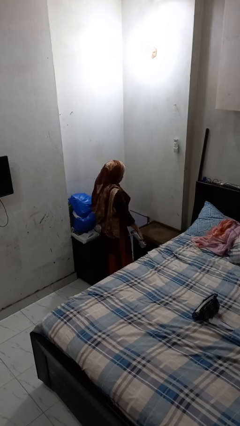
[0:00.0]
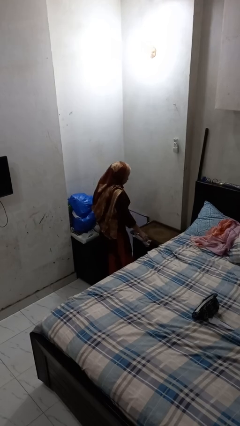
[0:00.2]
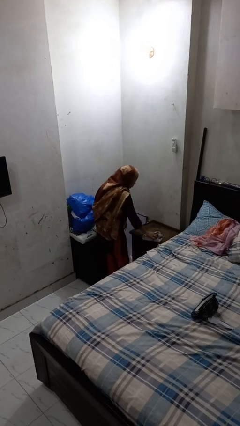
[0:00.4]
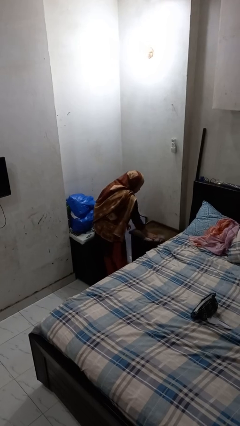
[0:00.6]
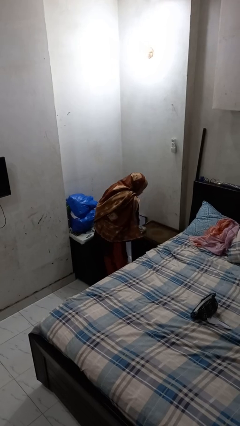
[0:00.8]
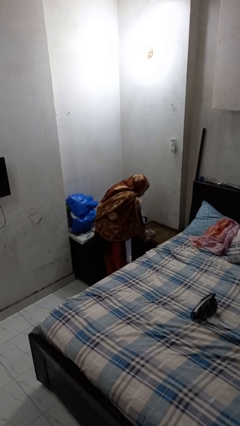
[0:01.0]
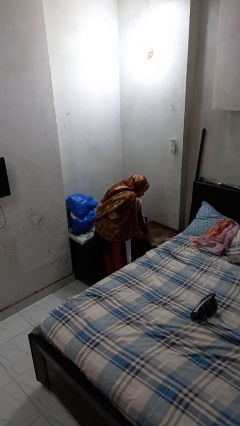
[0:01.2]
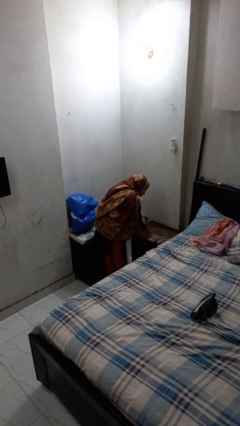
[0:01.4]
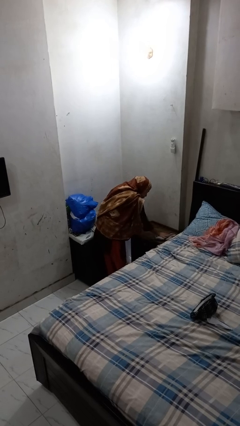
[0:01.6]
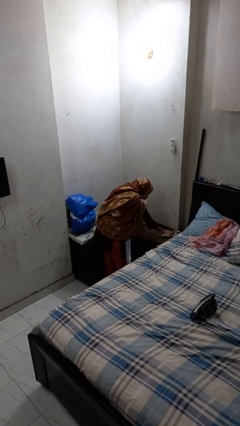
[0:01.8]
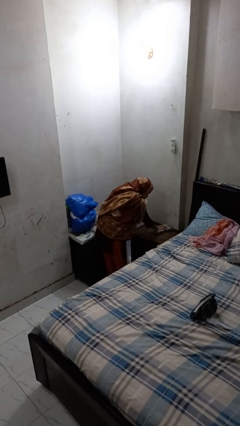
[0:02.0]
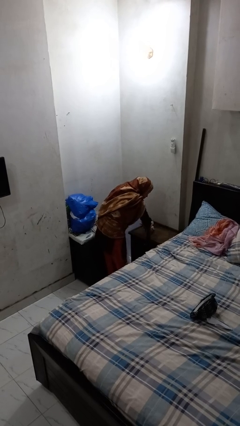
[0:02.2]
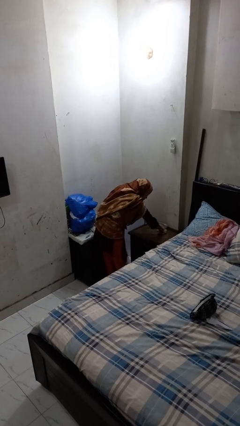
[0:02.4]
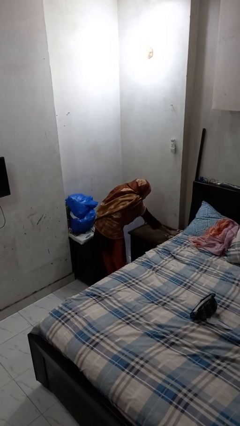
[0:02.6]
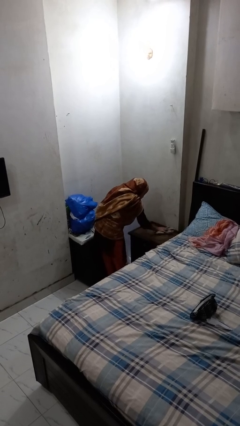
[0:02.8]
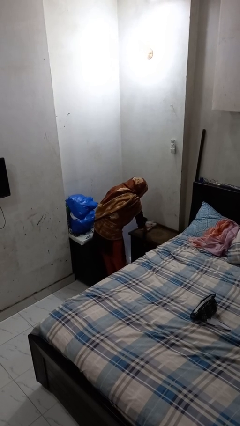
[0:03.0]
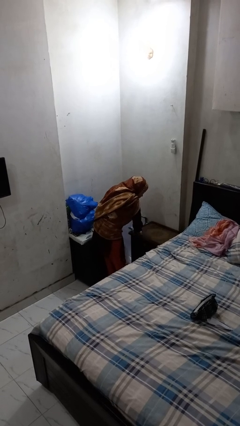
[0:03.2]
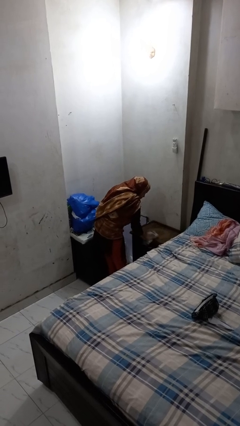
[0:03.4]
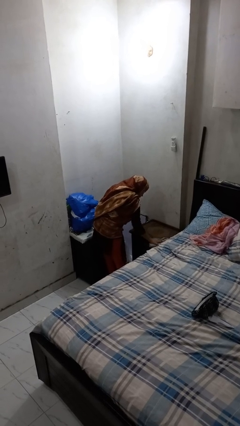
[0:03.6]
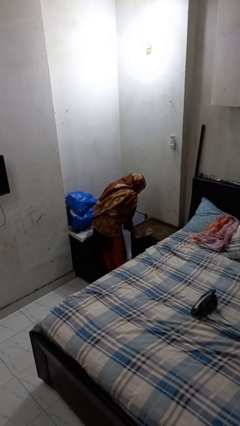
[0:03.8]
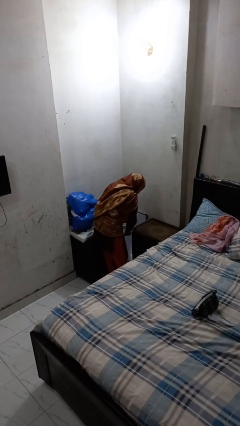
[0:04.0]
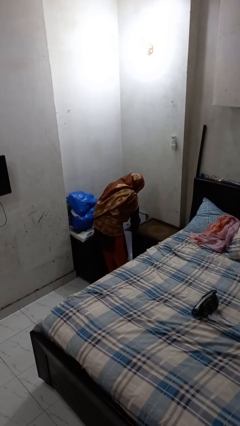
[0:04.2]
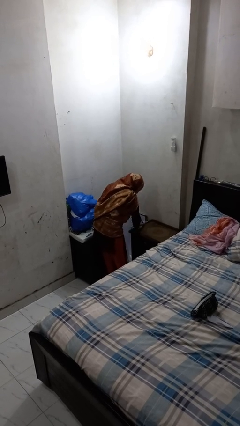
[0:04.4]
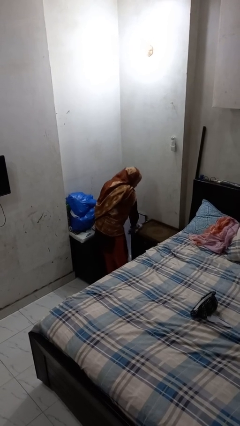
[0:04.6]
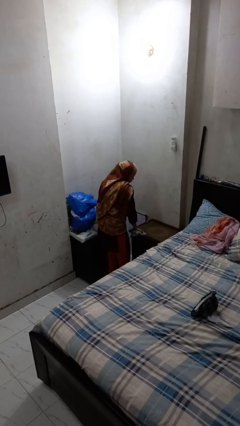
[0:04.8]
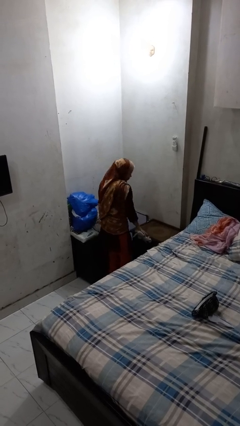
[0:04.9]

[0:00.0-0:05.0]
person cleans table with rag

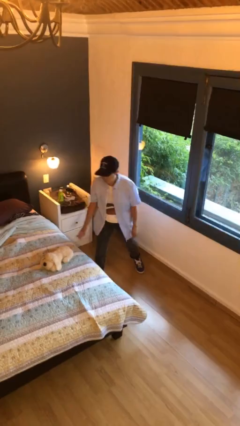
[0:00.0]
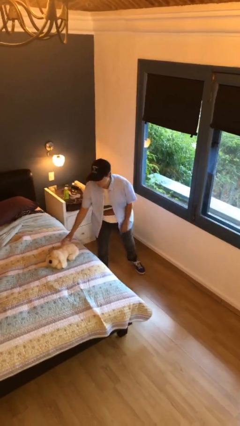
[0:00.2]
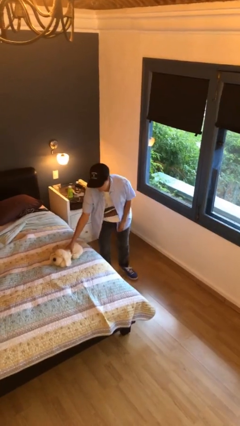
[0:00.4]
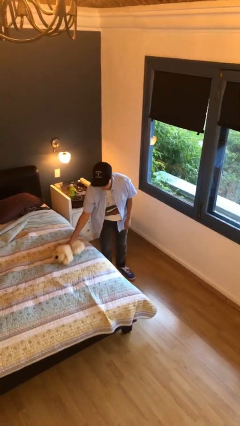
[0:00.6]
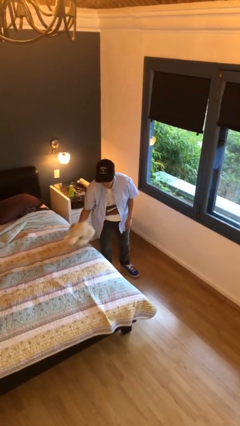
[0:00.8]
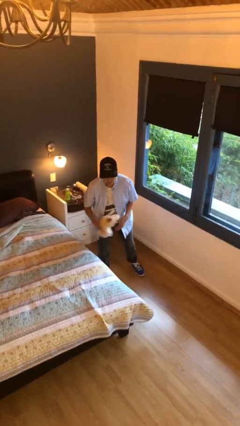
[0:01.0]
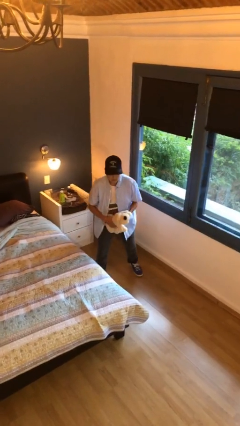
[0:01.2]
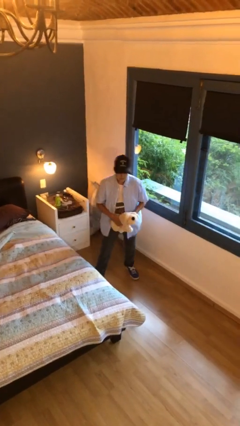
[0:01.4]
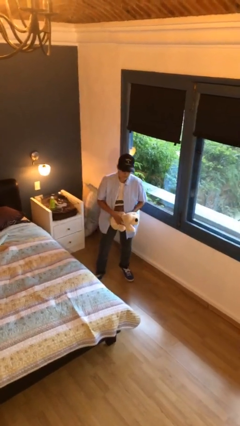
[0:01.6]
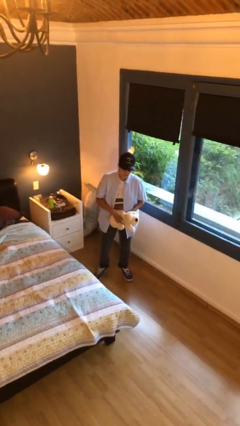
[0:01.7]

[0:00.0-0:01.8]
person picks up object from bed

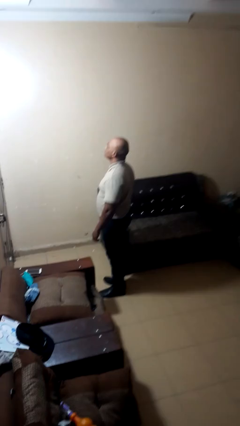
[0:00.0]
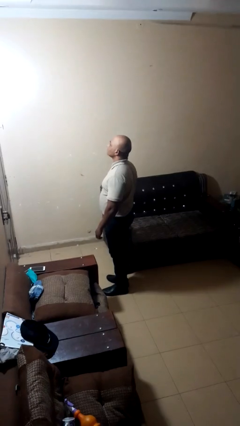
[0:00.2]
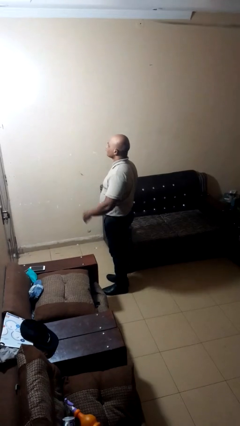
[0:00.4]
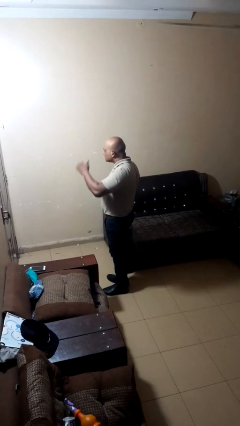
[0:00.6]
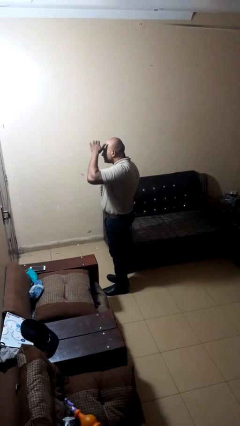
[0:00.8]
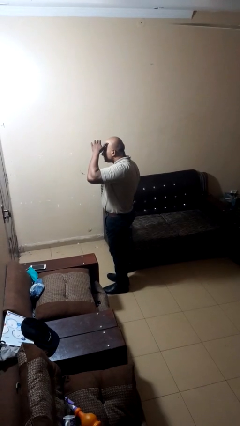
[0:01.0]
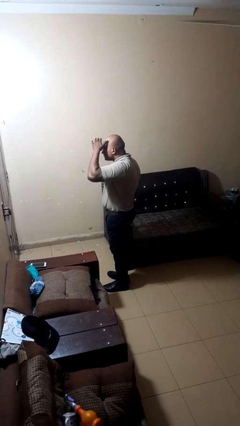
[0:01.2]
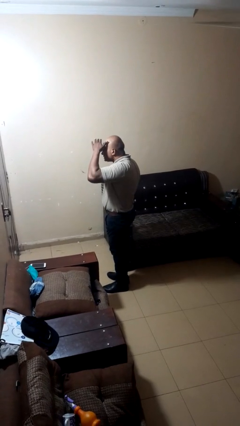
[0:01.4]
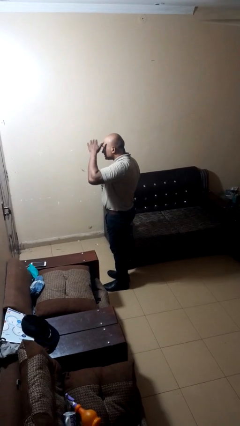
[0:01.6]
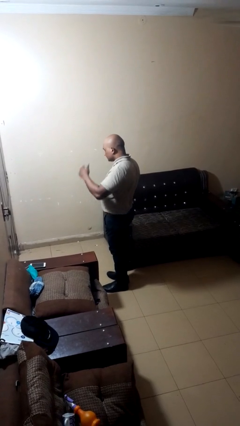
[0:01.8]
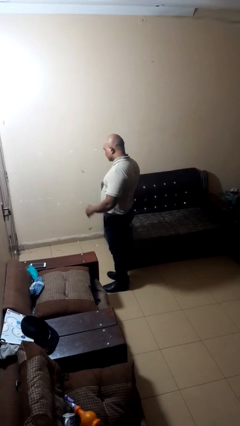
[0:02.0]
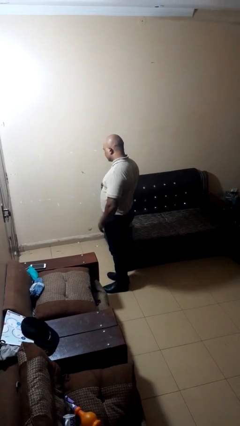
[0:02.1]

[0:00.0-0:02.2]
person shades eyes

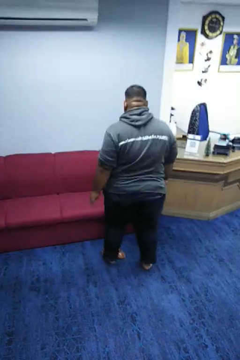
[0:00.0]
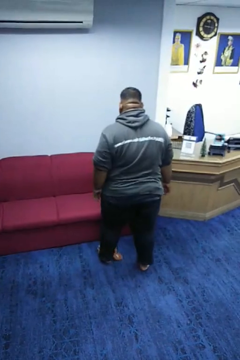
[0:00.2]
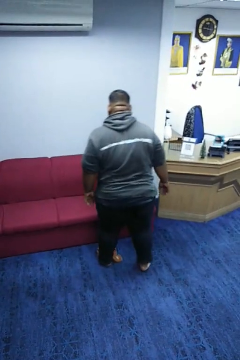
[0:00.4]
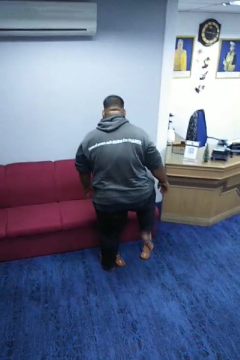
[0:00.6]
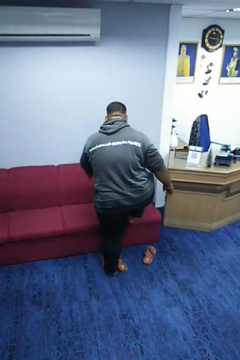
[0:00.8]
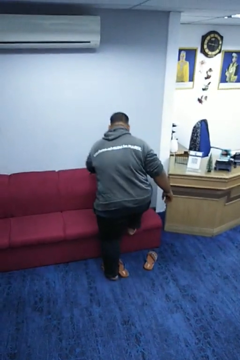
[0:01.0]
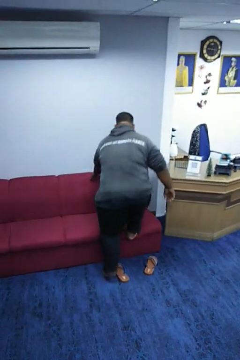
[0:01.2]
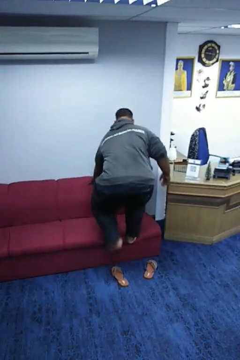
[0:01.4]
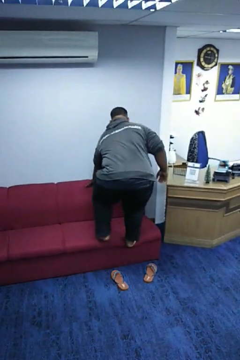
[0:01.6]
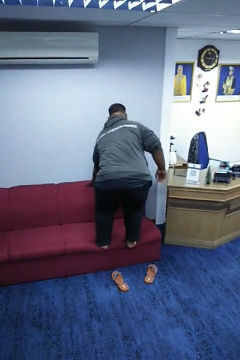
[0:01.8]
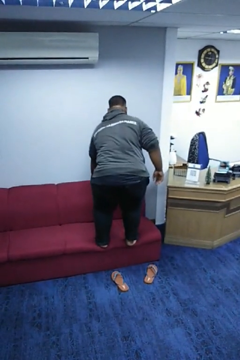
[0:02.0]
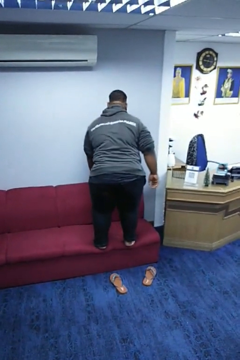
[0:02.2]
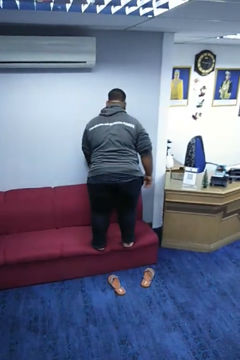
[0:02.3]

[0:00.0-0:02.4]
person climbs on couch

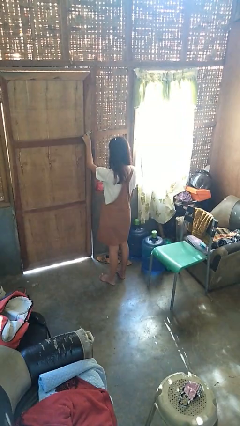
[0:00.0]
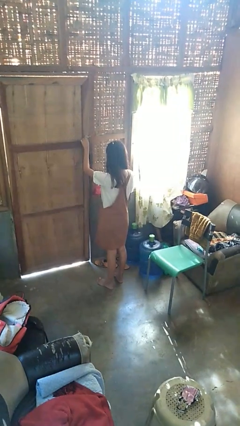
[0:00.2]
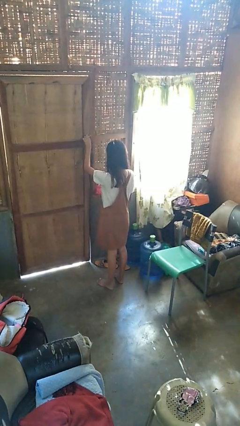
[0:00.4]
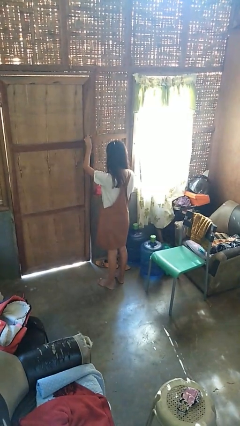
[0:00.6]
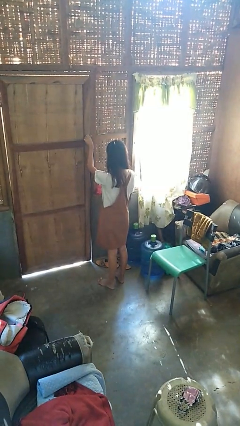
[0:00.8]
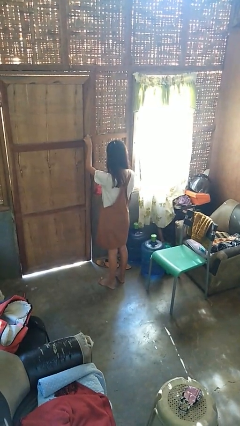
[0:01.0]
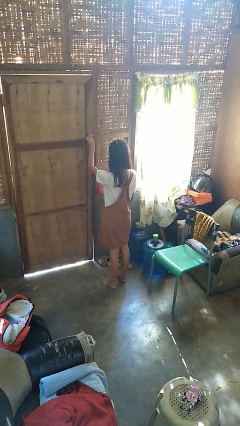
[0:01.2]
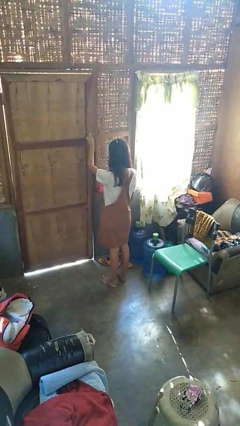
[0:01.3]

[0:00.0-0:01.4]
person locks door with keys

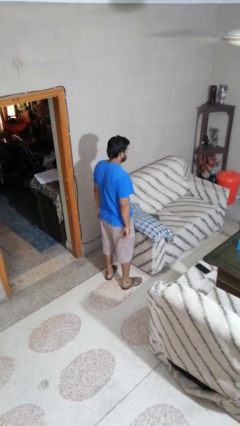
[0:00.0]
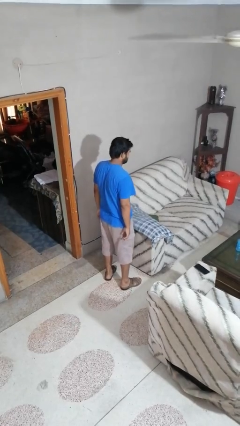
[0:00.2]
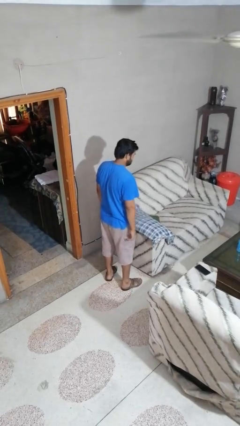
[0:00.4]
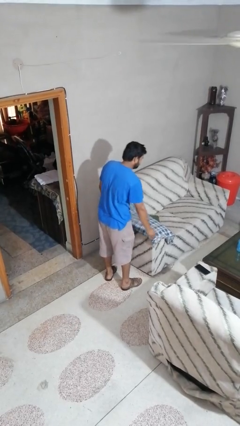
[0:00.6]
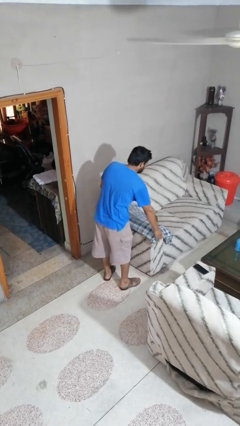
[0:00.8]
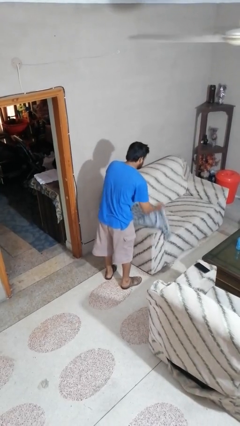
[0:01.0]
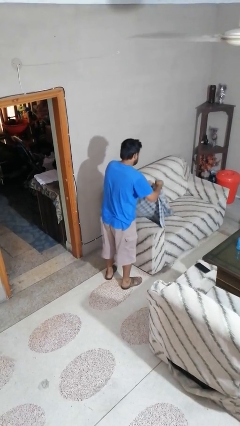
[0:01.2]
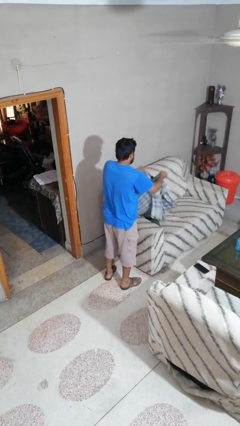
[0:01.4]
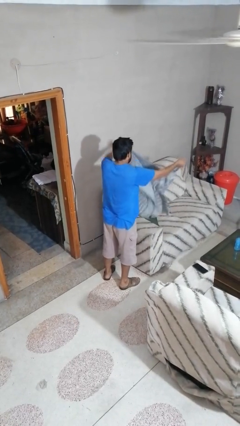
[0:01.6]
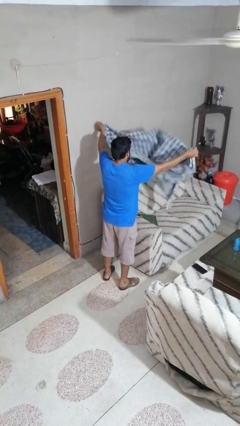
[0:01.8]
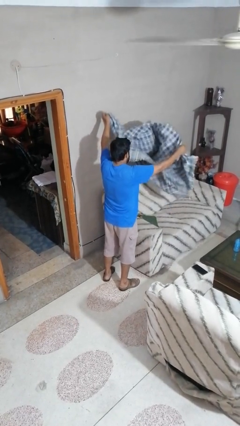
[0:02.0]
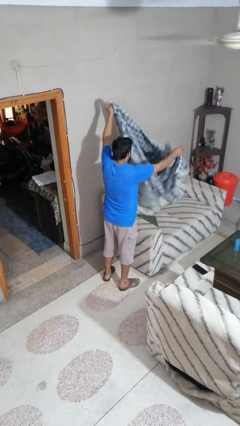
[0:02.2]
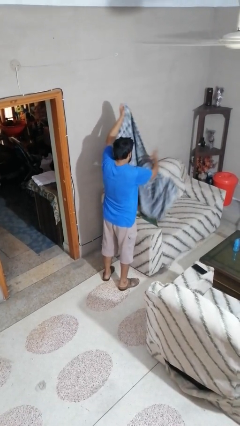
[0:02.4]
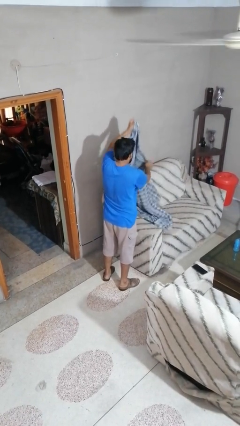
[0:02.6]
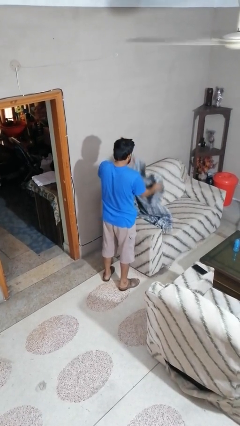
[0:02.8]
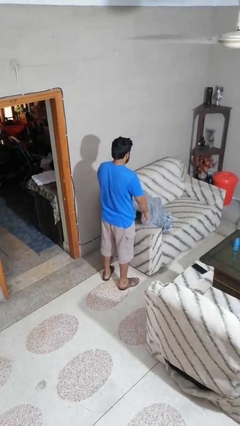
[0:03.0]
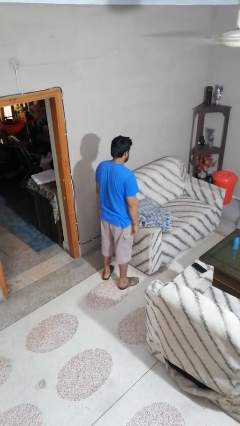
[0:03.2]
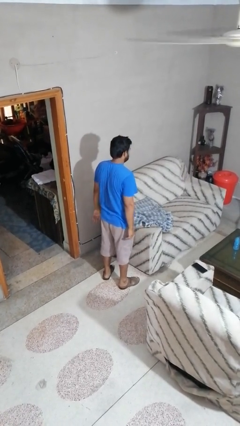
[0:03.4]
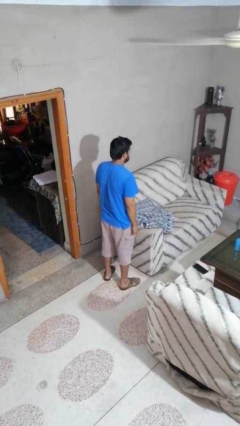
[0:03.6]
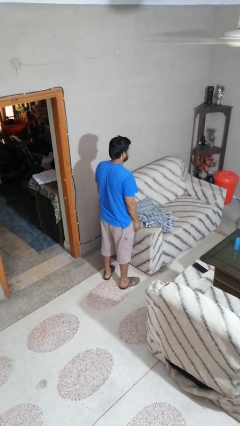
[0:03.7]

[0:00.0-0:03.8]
person unfolds blanket

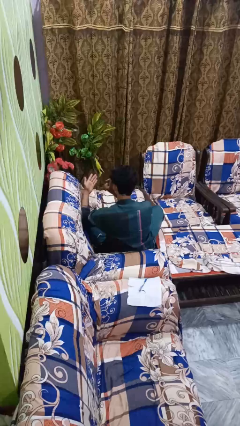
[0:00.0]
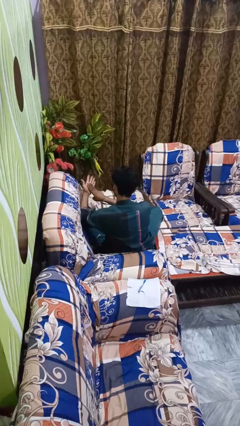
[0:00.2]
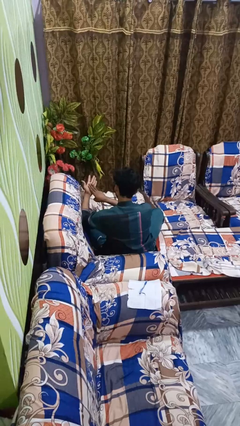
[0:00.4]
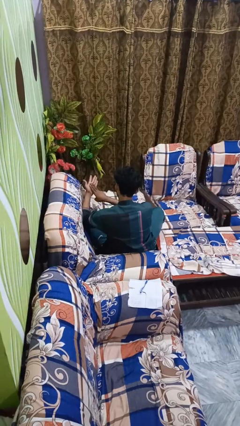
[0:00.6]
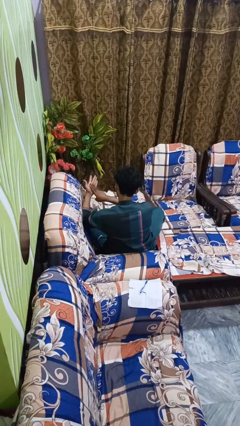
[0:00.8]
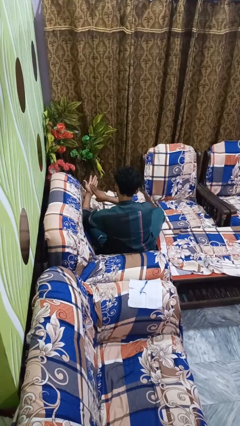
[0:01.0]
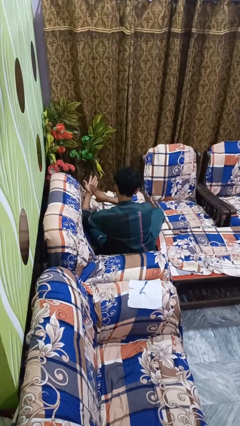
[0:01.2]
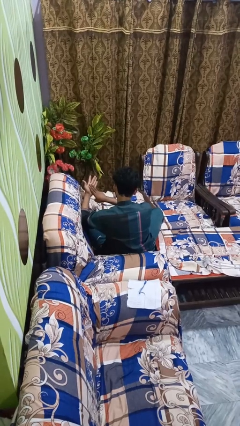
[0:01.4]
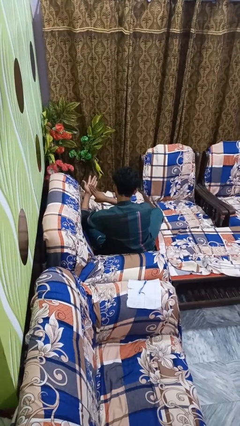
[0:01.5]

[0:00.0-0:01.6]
person gestures hang loose
